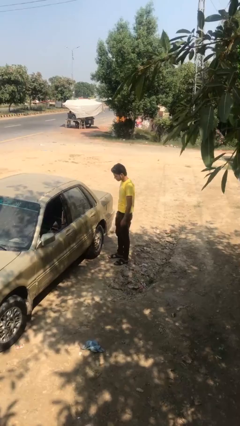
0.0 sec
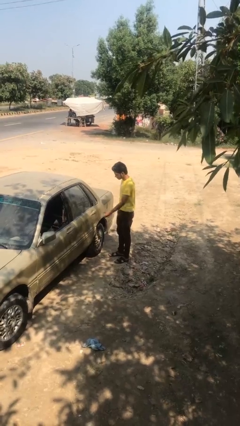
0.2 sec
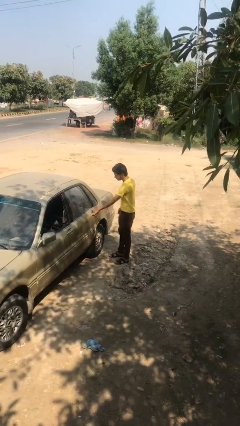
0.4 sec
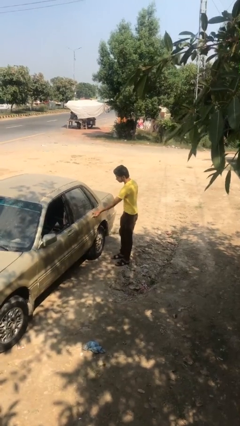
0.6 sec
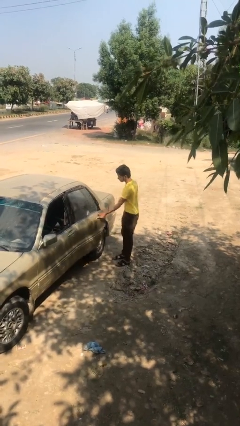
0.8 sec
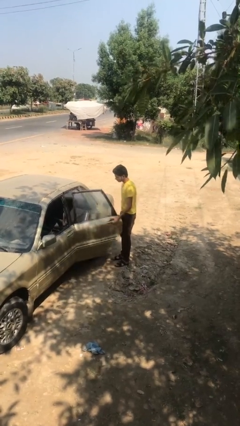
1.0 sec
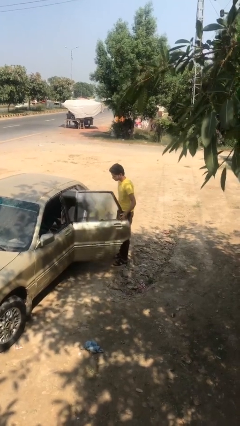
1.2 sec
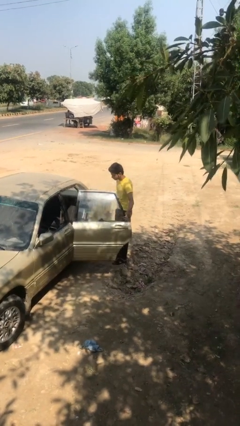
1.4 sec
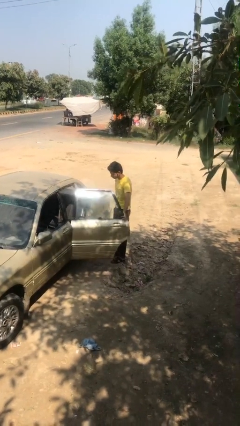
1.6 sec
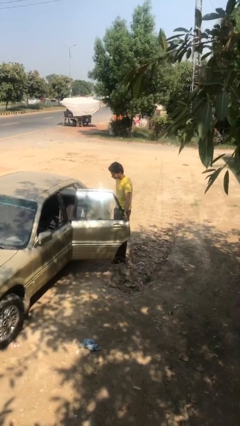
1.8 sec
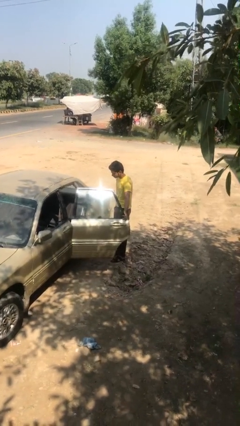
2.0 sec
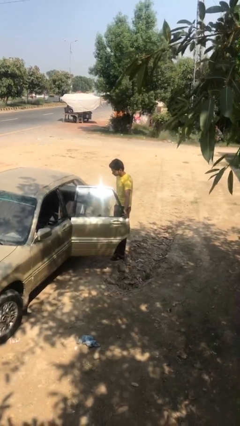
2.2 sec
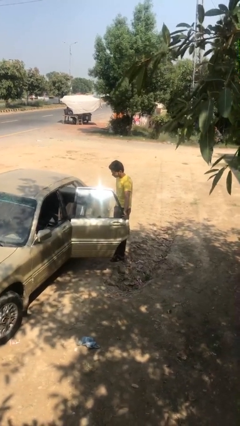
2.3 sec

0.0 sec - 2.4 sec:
person opens car door

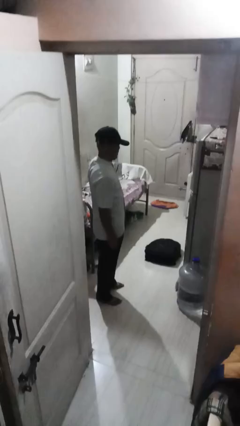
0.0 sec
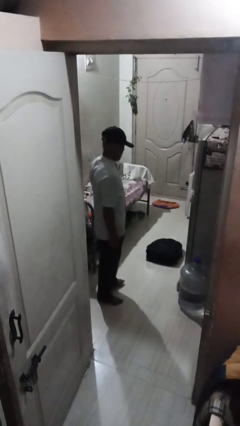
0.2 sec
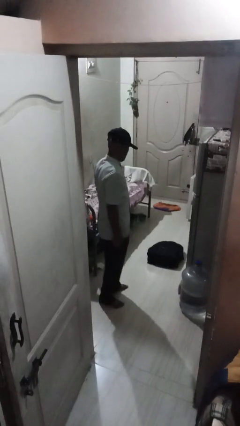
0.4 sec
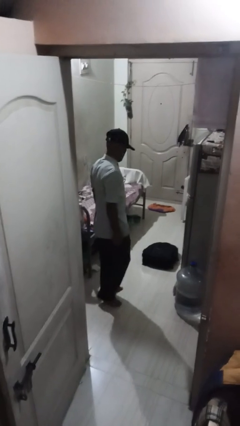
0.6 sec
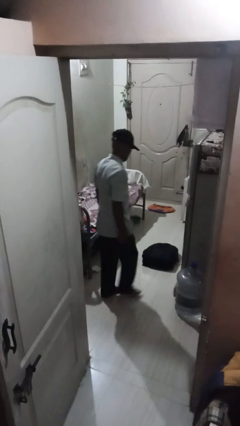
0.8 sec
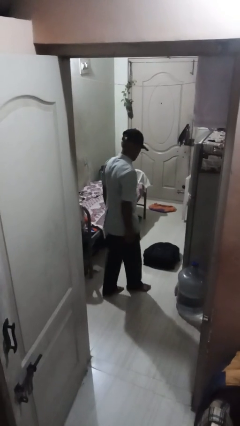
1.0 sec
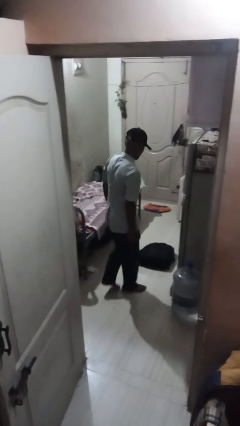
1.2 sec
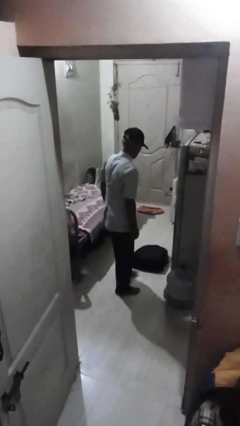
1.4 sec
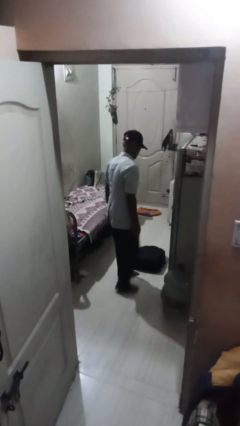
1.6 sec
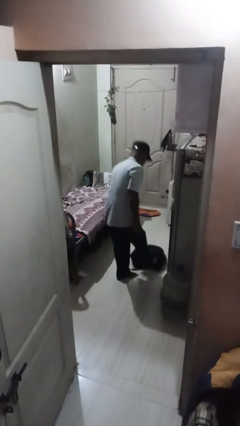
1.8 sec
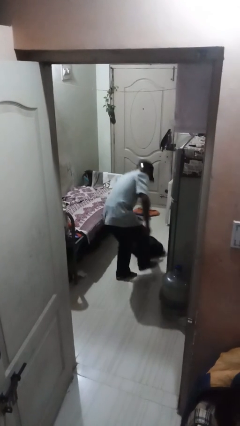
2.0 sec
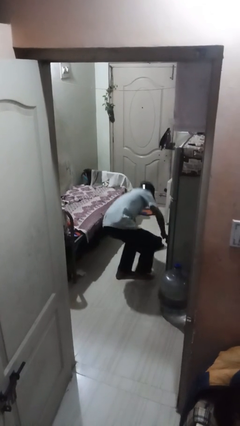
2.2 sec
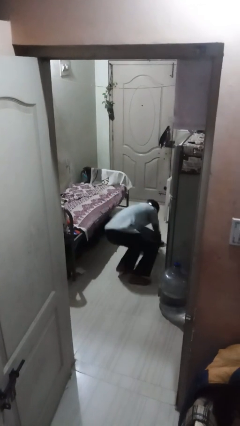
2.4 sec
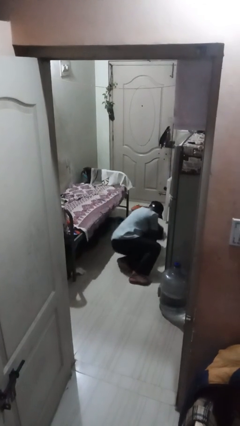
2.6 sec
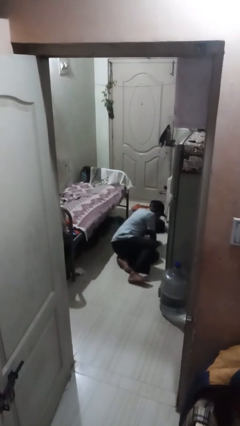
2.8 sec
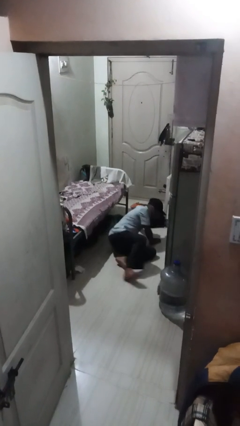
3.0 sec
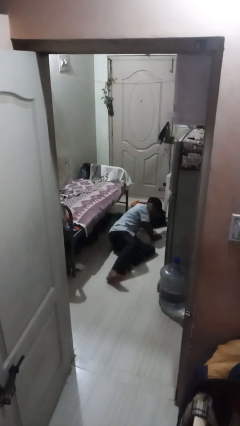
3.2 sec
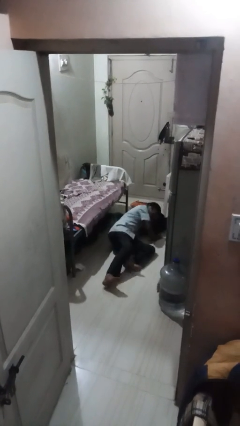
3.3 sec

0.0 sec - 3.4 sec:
person trips on object on floor

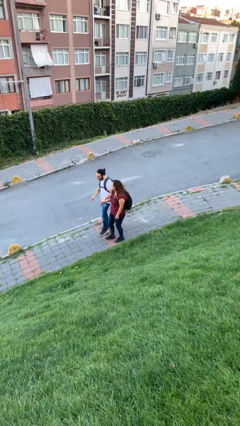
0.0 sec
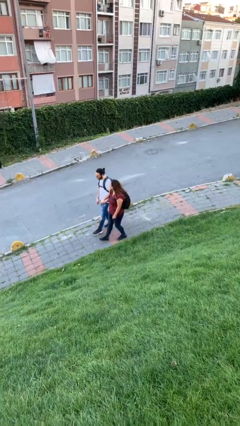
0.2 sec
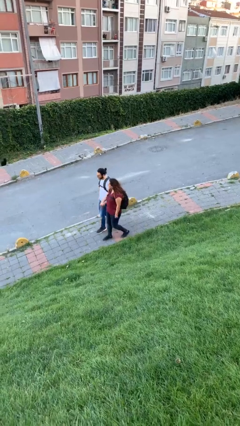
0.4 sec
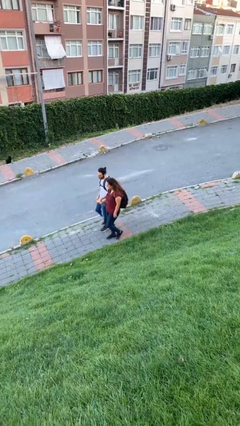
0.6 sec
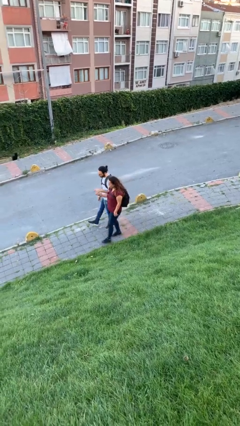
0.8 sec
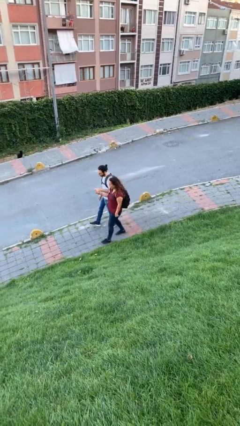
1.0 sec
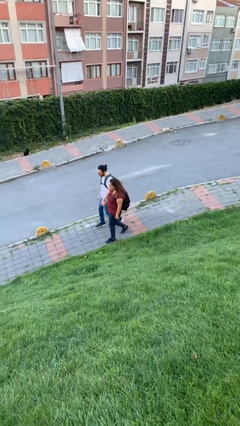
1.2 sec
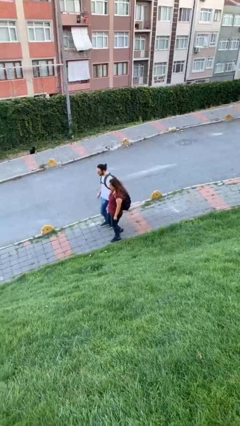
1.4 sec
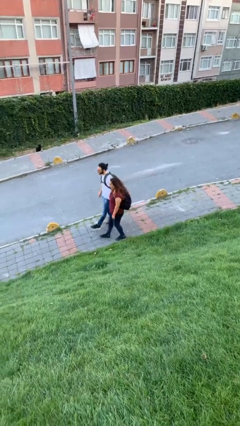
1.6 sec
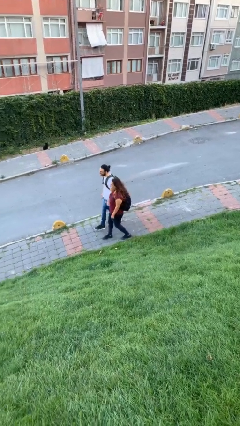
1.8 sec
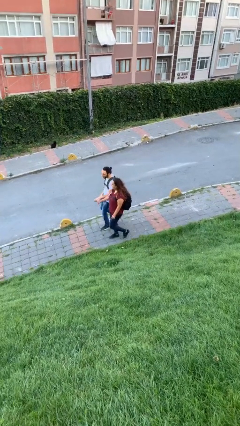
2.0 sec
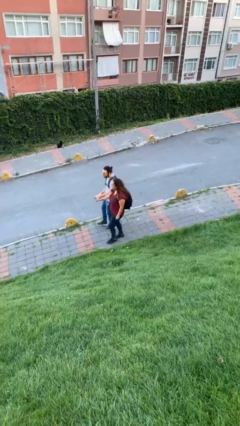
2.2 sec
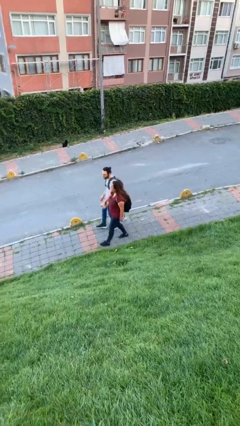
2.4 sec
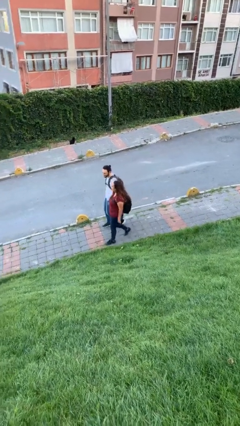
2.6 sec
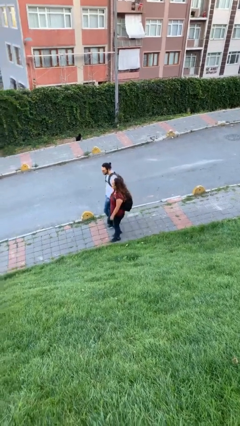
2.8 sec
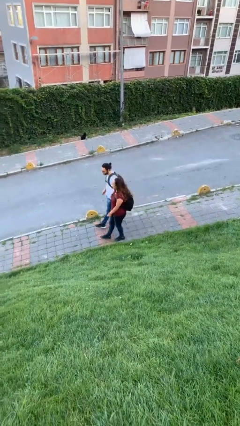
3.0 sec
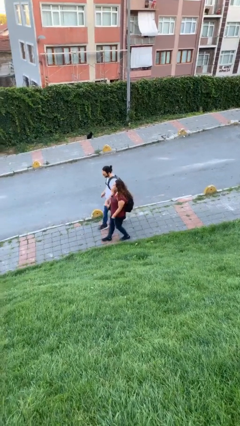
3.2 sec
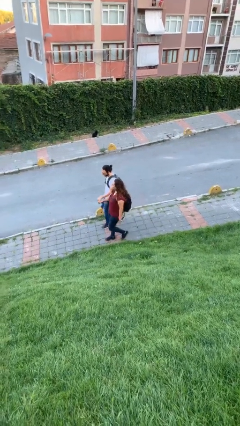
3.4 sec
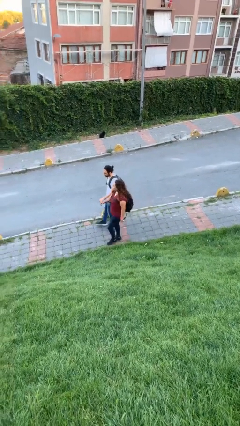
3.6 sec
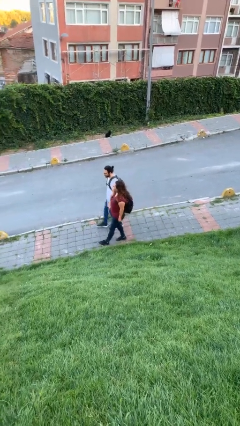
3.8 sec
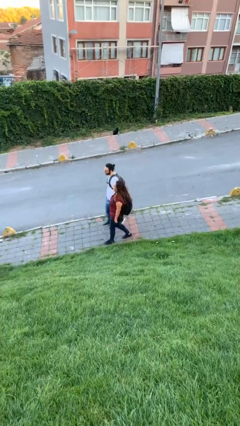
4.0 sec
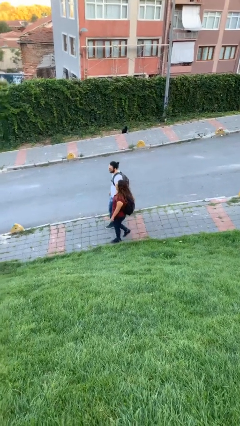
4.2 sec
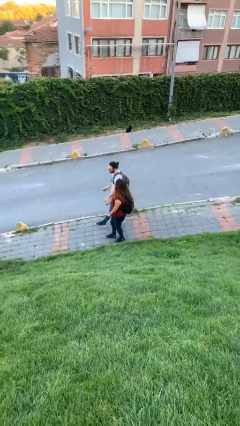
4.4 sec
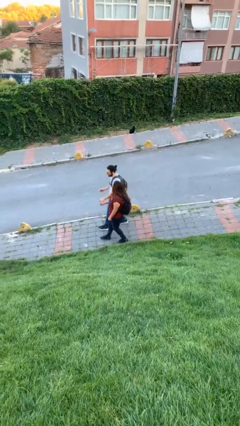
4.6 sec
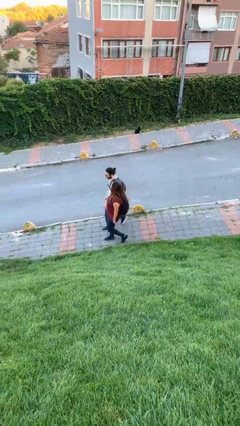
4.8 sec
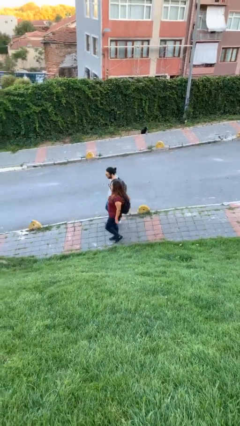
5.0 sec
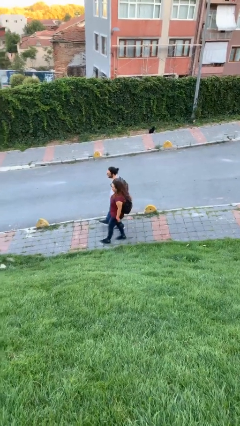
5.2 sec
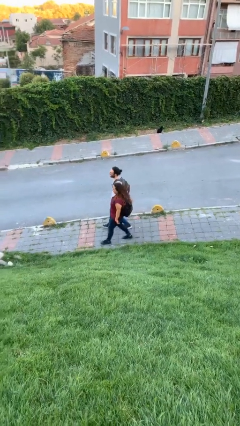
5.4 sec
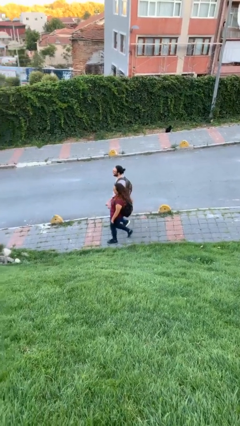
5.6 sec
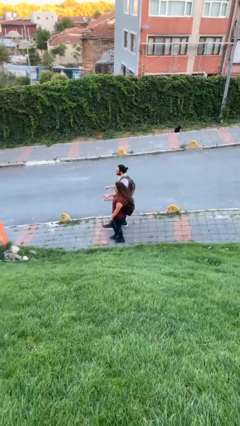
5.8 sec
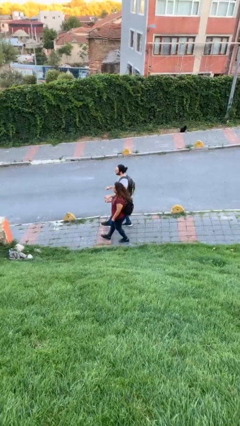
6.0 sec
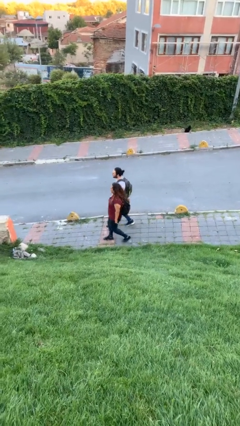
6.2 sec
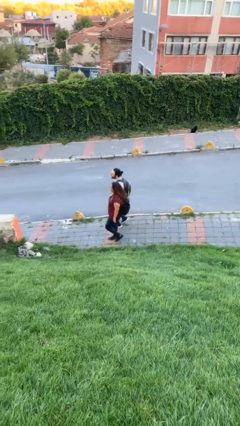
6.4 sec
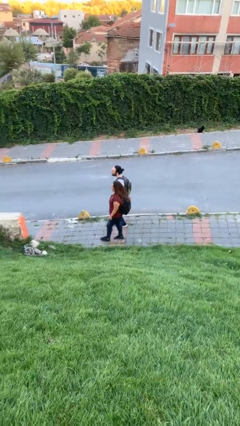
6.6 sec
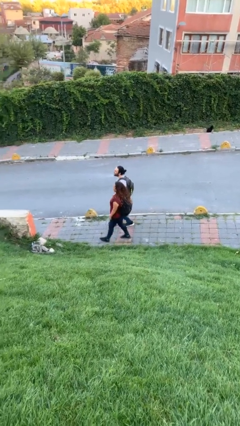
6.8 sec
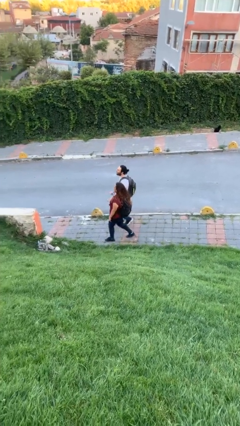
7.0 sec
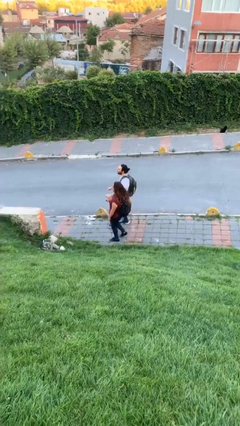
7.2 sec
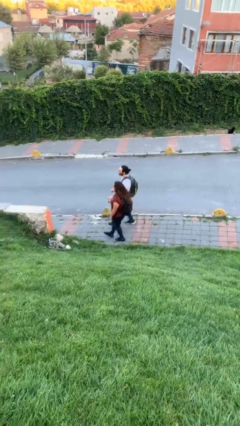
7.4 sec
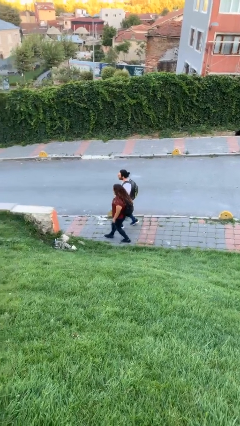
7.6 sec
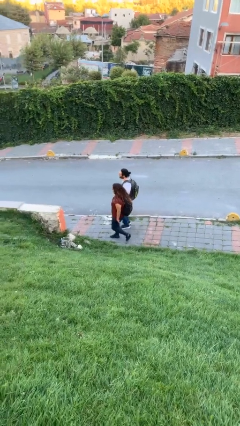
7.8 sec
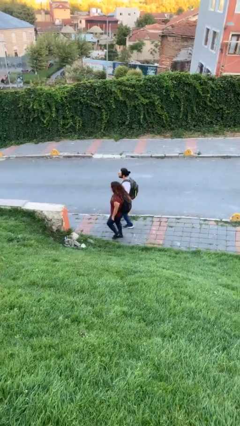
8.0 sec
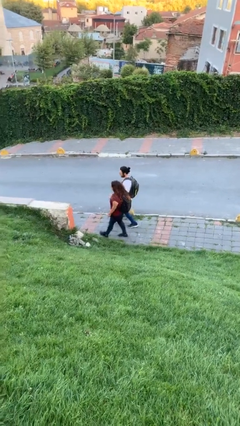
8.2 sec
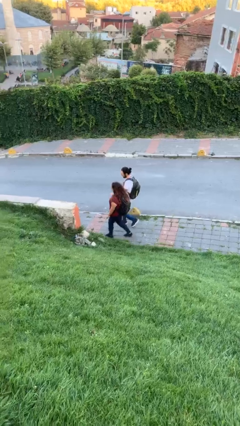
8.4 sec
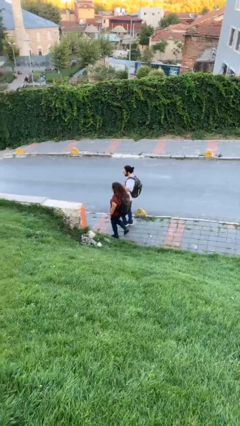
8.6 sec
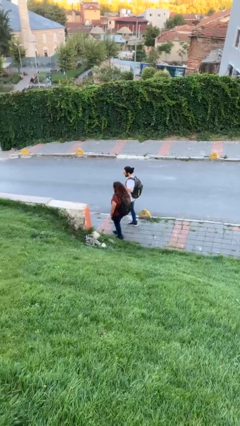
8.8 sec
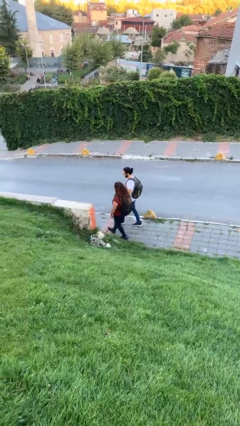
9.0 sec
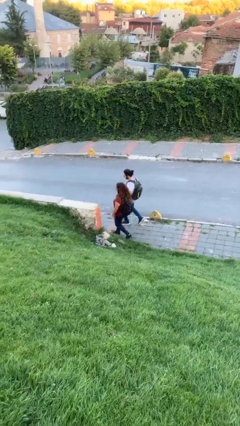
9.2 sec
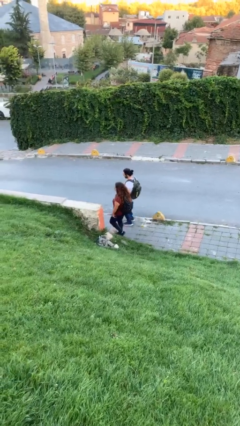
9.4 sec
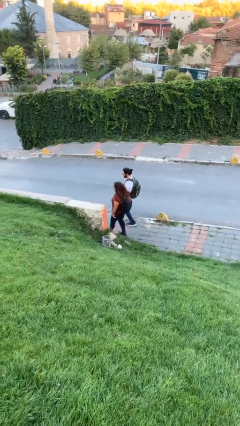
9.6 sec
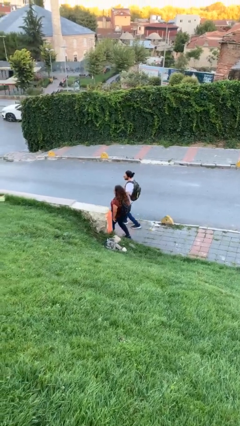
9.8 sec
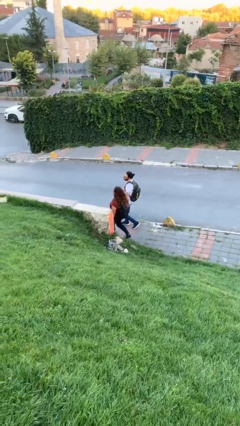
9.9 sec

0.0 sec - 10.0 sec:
person holds hand

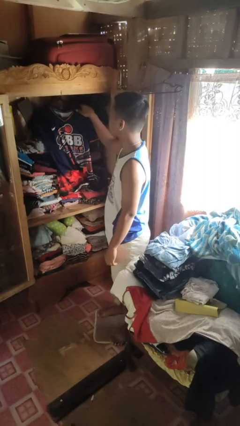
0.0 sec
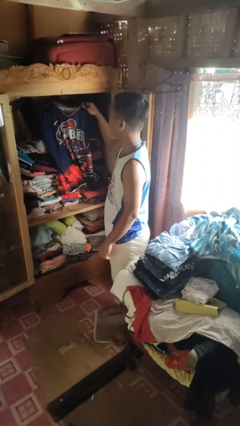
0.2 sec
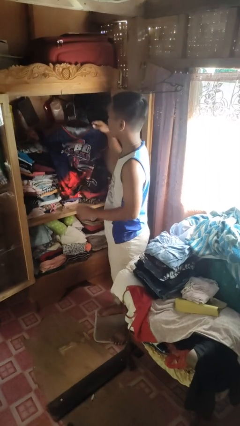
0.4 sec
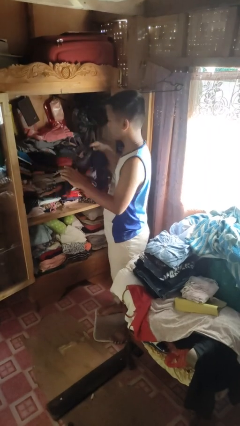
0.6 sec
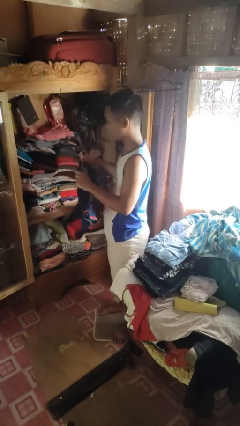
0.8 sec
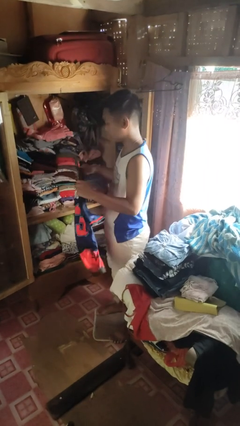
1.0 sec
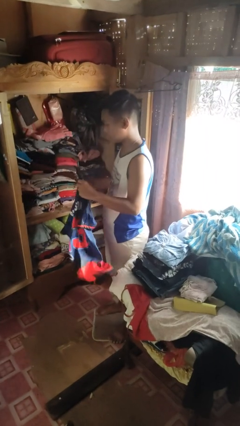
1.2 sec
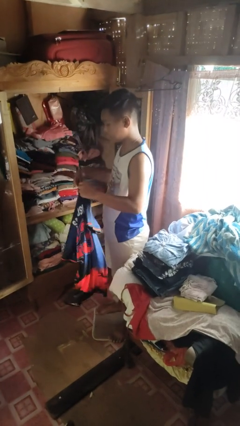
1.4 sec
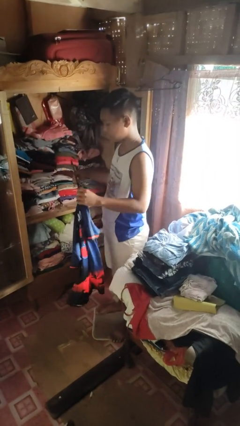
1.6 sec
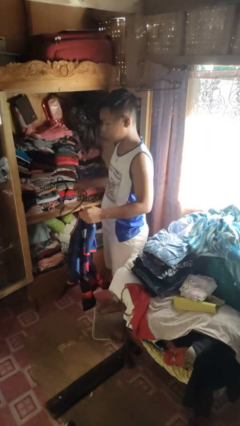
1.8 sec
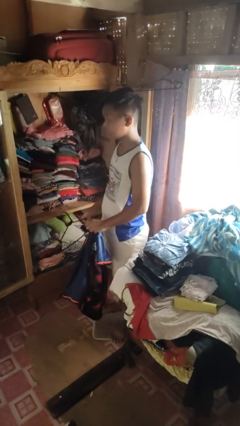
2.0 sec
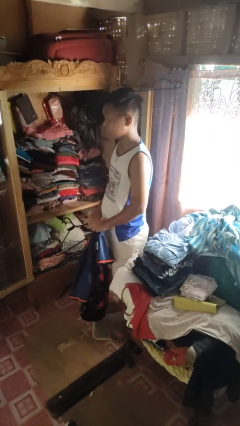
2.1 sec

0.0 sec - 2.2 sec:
person takes clothes from closet
